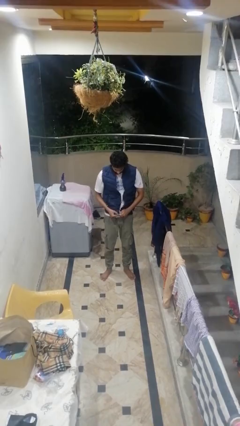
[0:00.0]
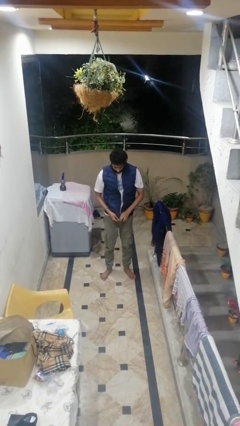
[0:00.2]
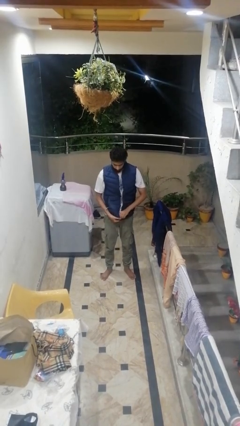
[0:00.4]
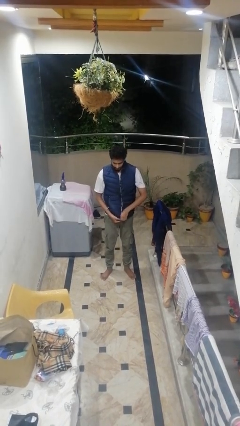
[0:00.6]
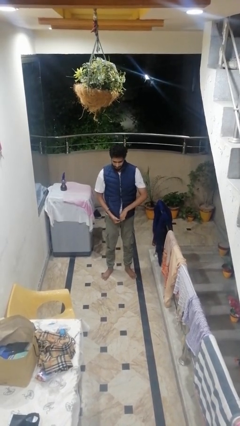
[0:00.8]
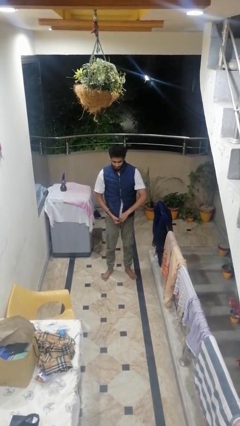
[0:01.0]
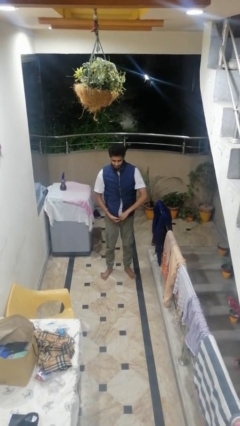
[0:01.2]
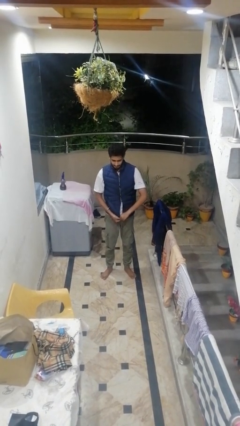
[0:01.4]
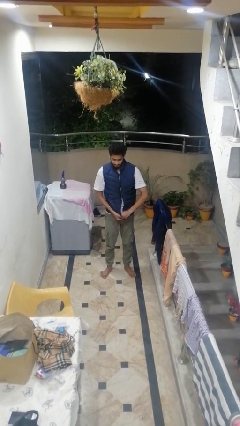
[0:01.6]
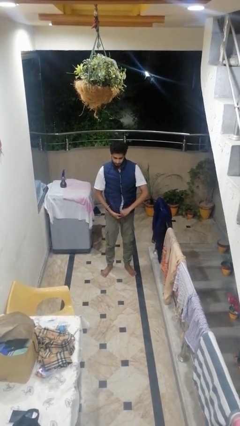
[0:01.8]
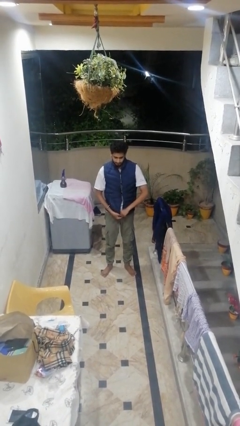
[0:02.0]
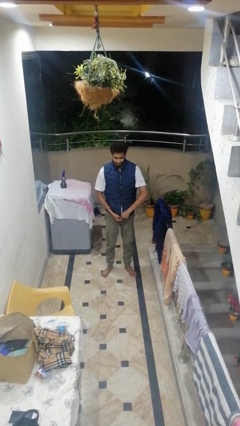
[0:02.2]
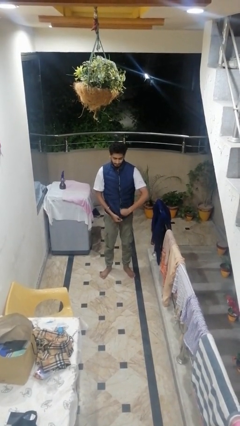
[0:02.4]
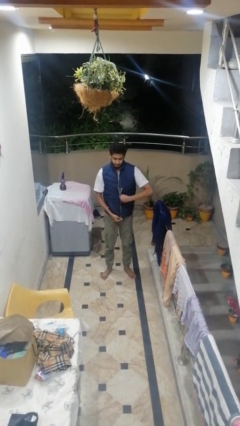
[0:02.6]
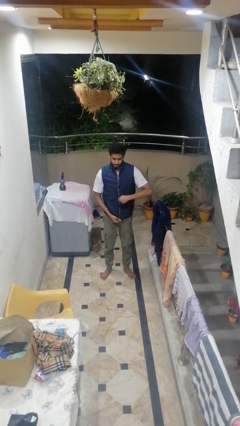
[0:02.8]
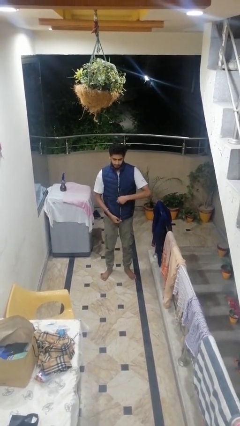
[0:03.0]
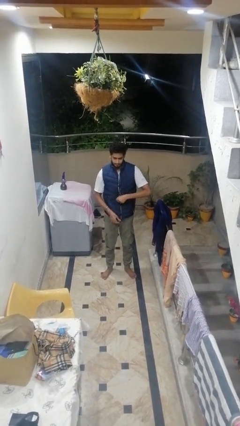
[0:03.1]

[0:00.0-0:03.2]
person zips up jacket

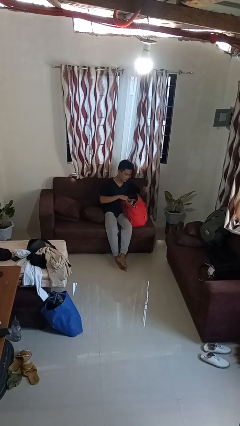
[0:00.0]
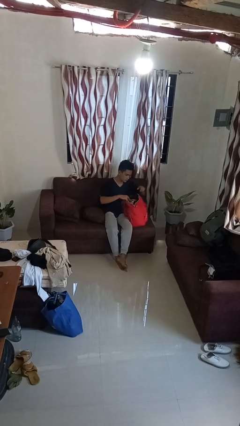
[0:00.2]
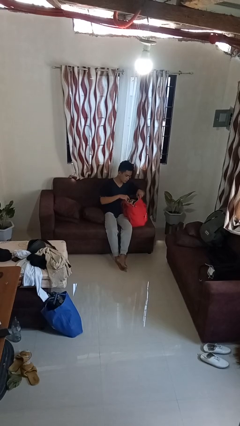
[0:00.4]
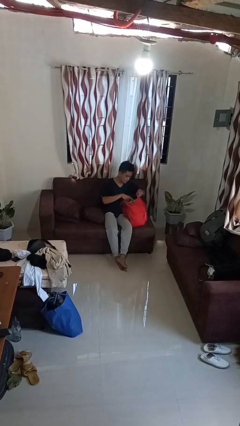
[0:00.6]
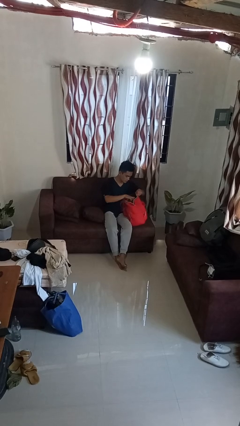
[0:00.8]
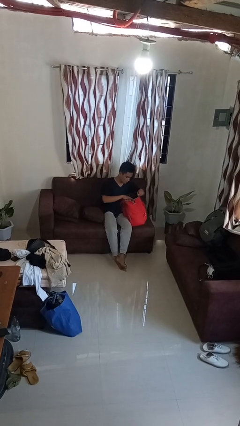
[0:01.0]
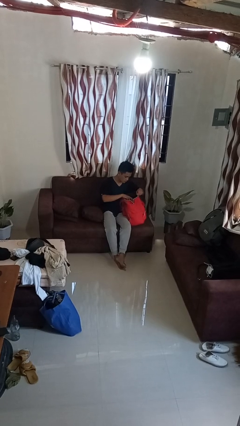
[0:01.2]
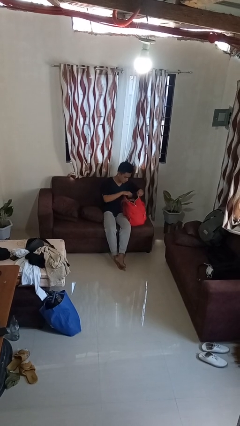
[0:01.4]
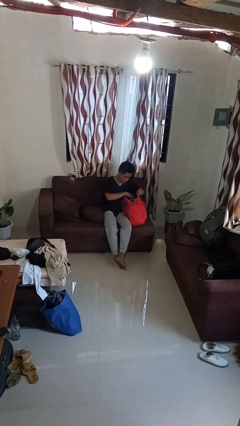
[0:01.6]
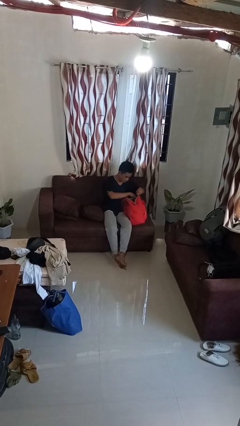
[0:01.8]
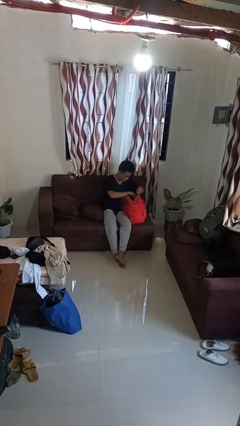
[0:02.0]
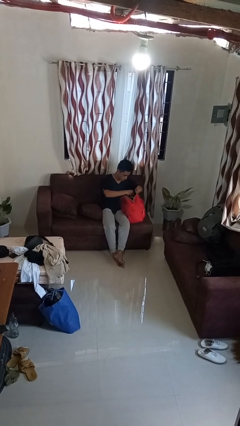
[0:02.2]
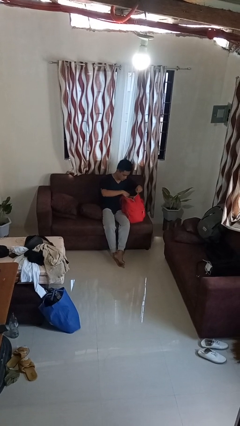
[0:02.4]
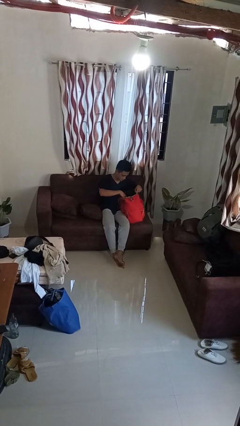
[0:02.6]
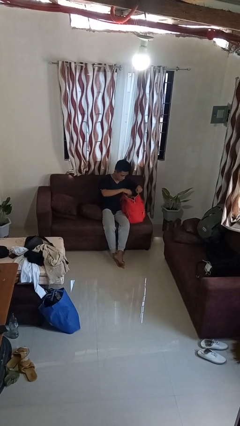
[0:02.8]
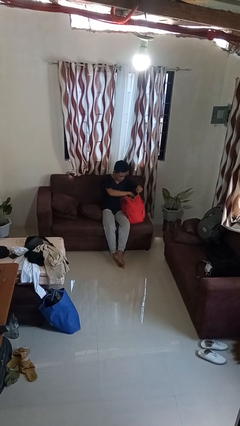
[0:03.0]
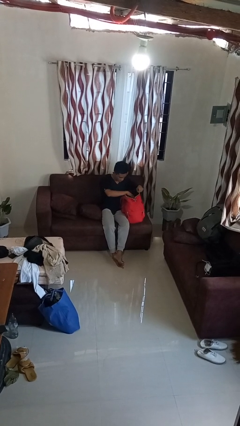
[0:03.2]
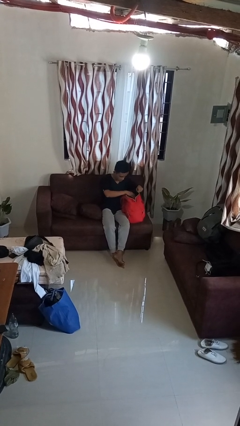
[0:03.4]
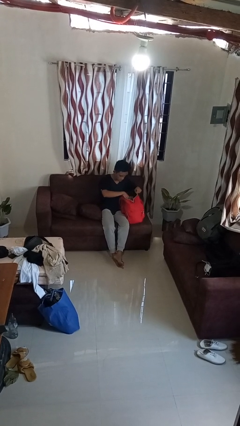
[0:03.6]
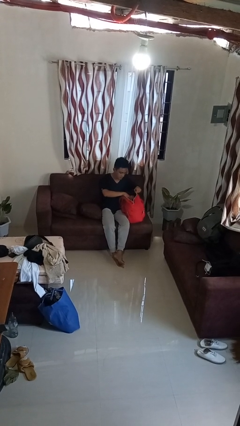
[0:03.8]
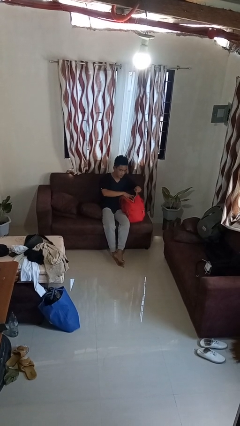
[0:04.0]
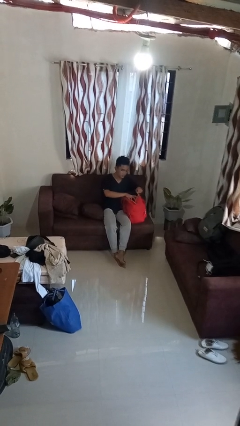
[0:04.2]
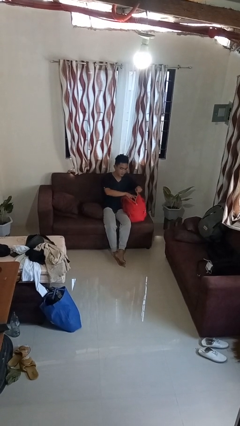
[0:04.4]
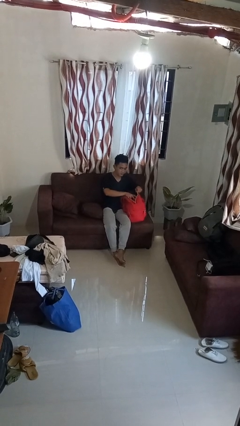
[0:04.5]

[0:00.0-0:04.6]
person searches in backpack

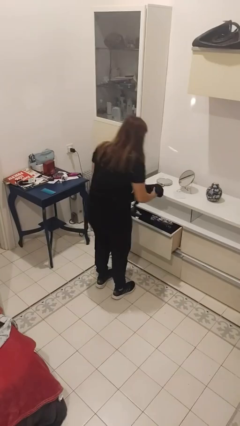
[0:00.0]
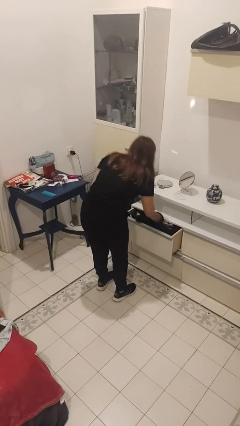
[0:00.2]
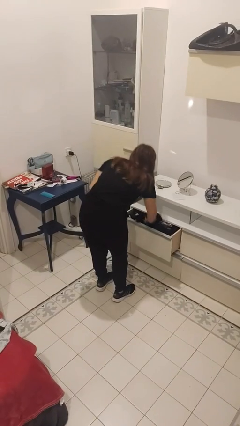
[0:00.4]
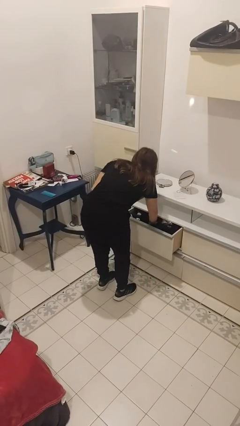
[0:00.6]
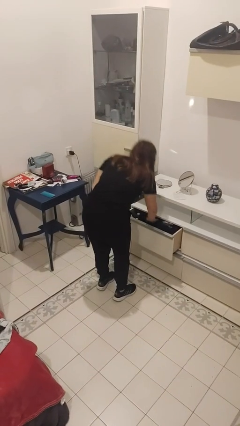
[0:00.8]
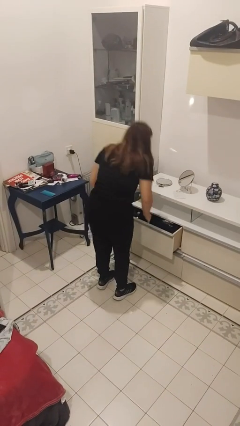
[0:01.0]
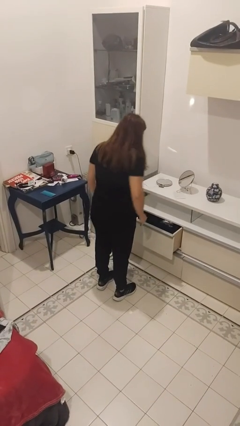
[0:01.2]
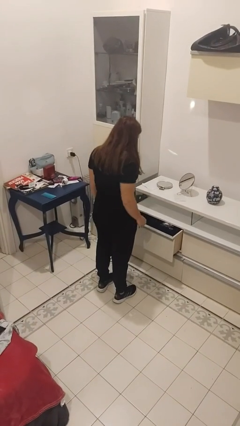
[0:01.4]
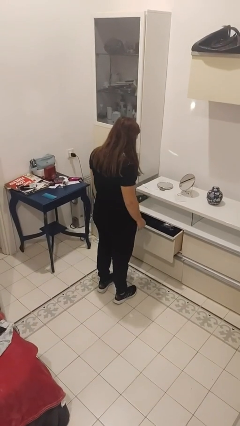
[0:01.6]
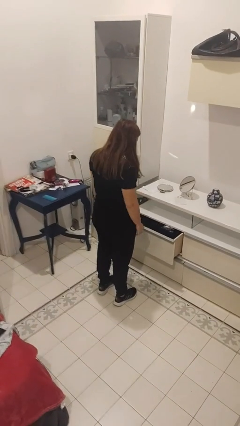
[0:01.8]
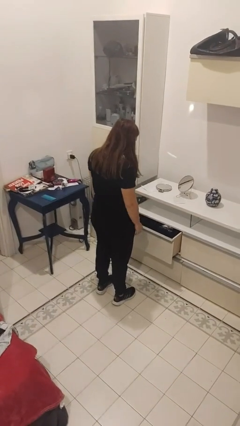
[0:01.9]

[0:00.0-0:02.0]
person puts clothes into dresser

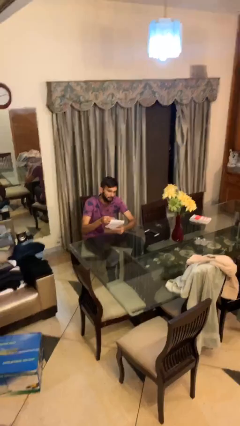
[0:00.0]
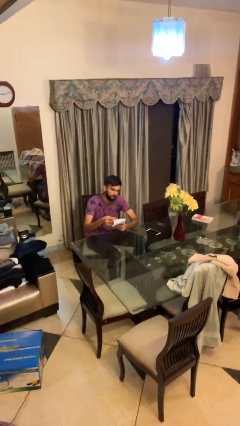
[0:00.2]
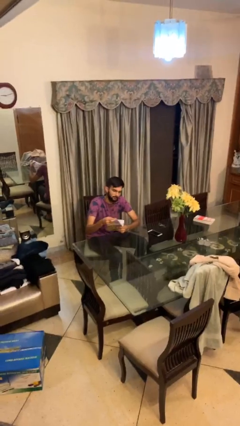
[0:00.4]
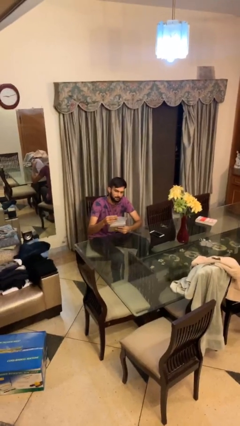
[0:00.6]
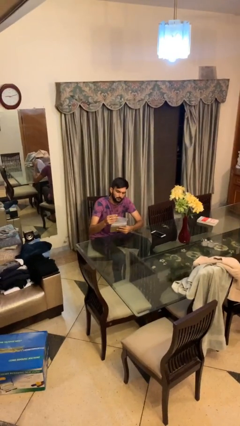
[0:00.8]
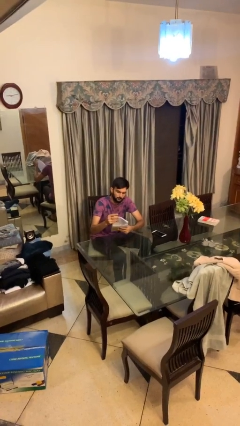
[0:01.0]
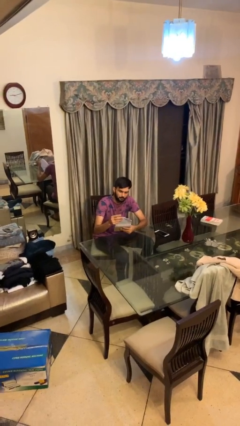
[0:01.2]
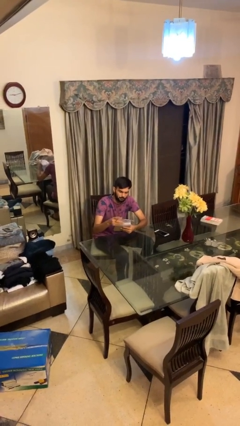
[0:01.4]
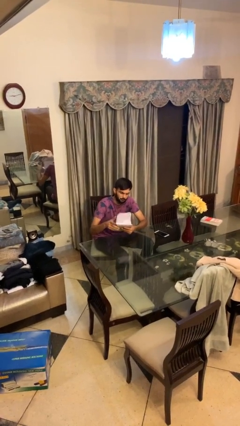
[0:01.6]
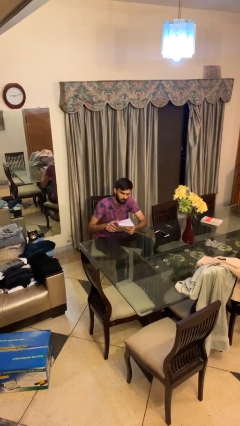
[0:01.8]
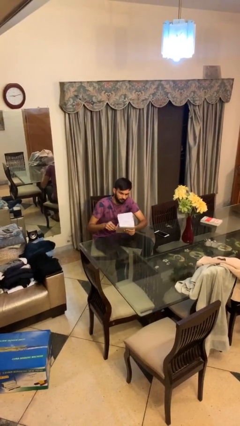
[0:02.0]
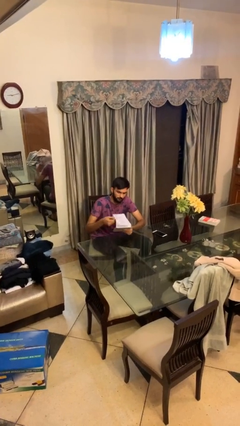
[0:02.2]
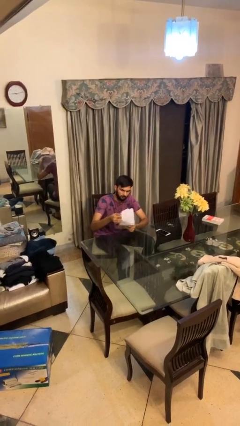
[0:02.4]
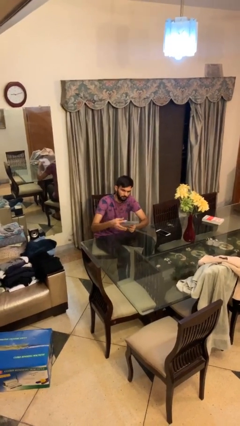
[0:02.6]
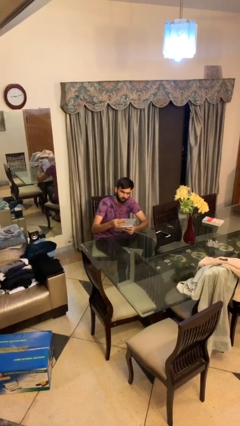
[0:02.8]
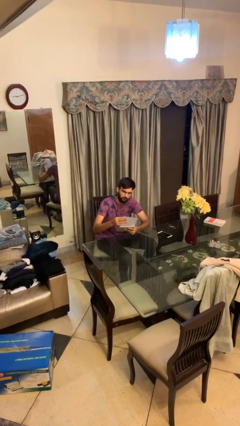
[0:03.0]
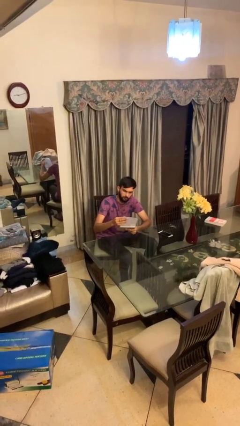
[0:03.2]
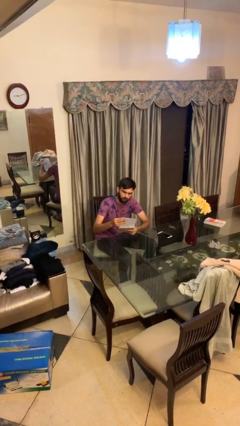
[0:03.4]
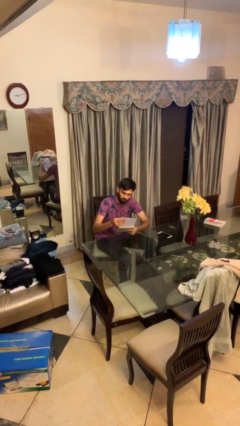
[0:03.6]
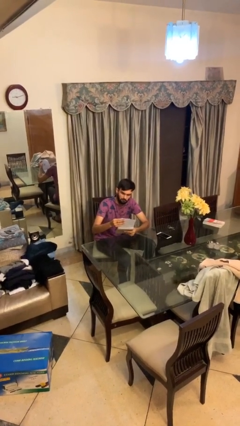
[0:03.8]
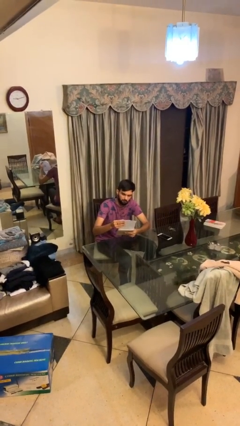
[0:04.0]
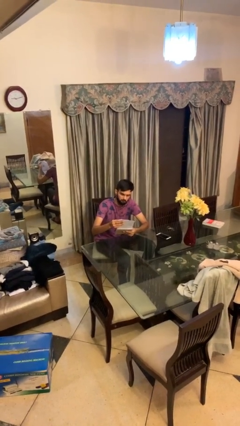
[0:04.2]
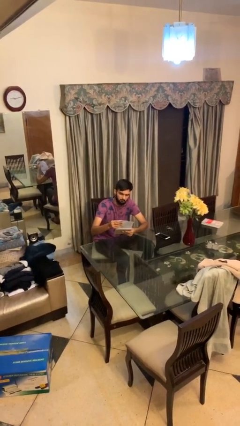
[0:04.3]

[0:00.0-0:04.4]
person reads document

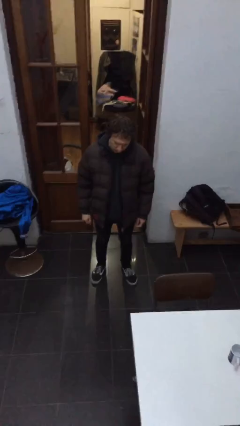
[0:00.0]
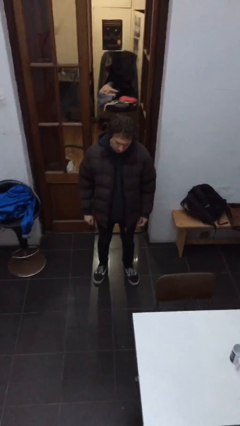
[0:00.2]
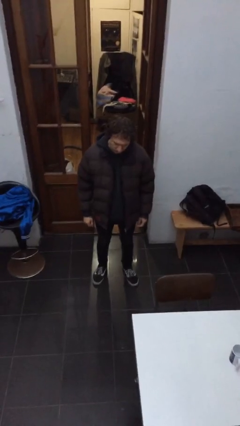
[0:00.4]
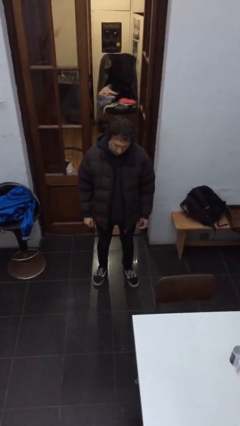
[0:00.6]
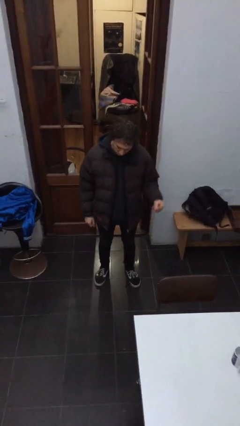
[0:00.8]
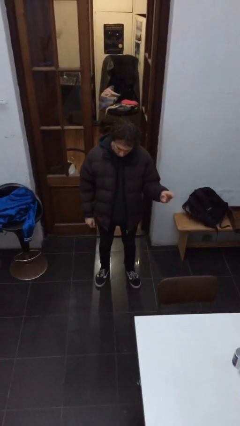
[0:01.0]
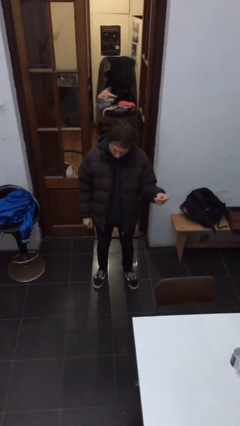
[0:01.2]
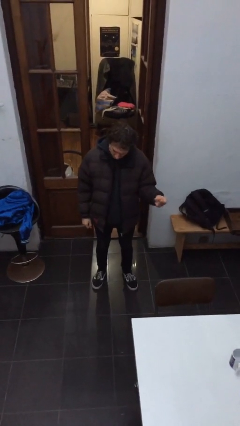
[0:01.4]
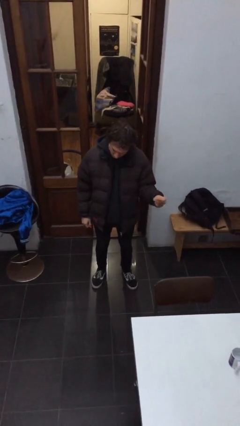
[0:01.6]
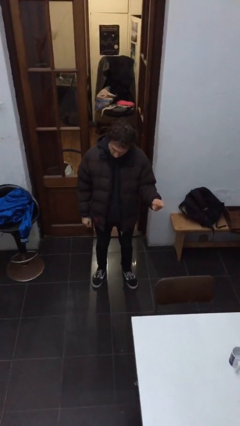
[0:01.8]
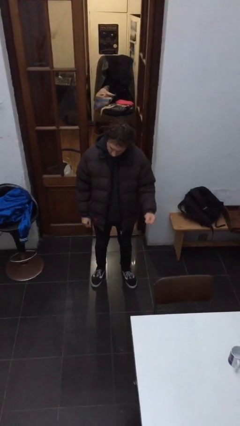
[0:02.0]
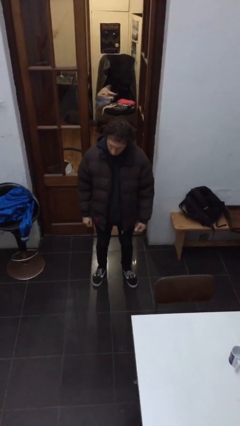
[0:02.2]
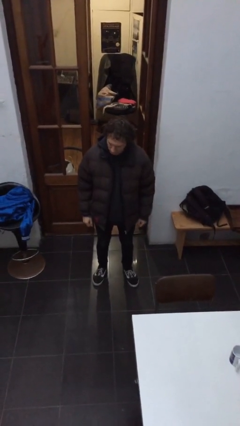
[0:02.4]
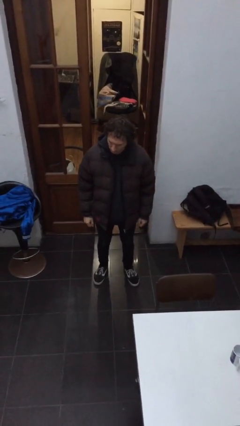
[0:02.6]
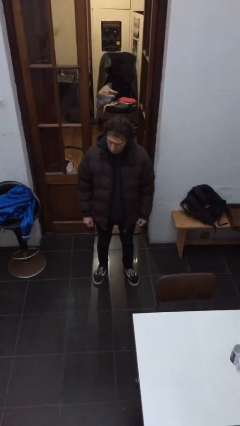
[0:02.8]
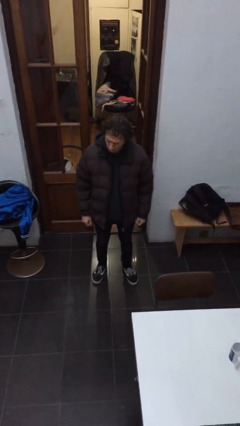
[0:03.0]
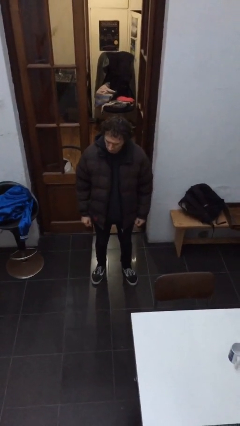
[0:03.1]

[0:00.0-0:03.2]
person snaps fingers

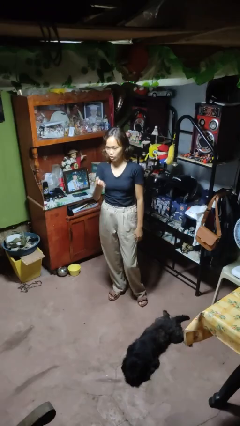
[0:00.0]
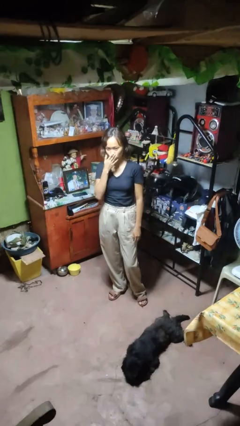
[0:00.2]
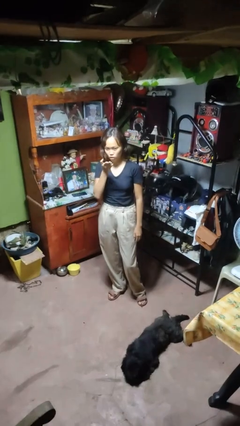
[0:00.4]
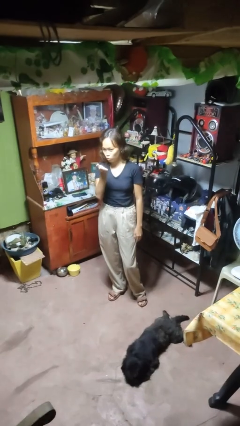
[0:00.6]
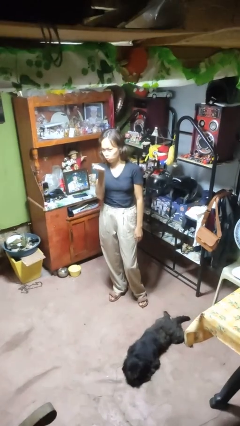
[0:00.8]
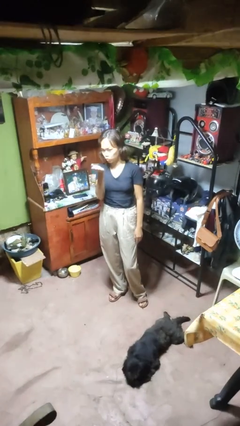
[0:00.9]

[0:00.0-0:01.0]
person gestures blow kiss
